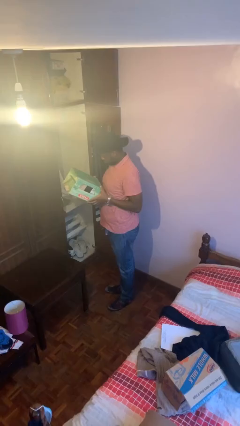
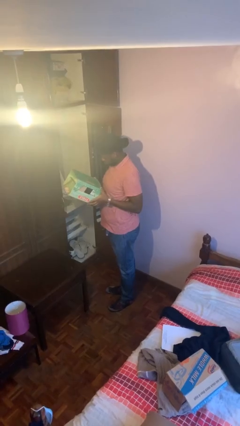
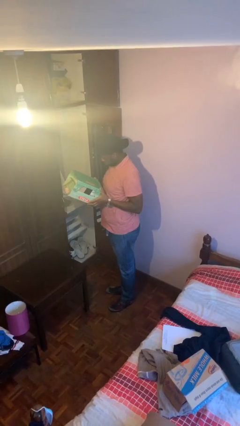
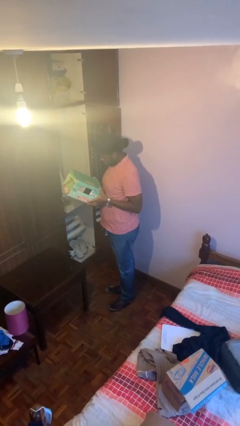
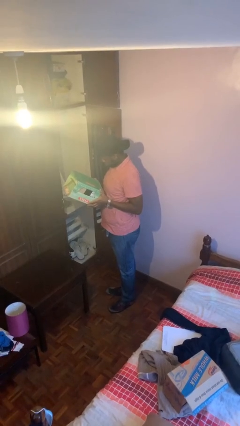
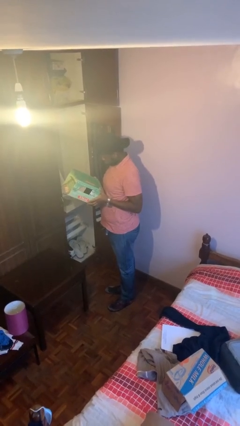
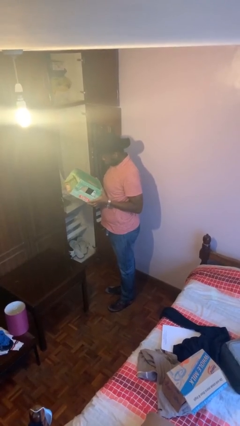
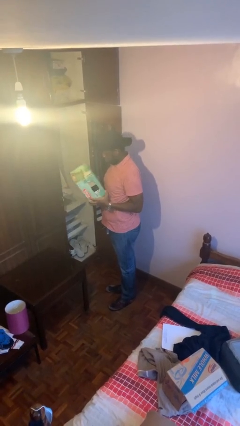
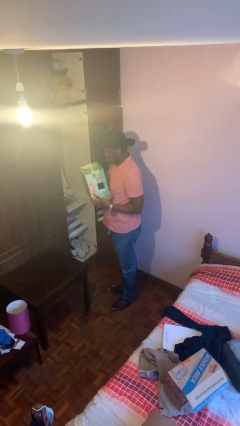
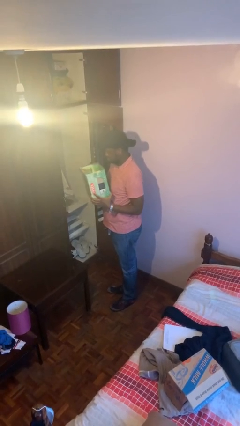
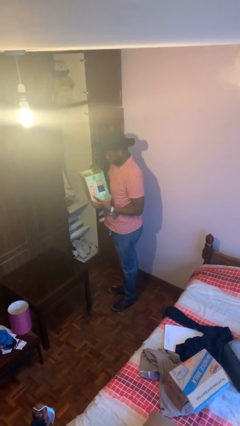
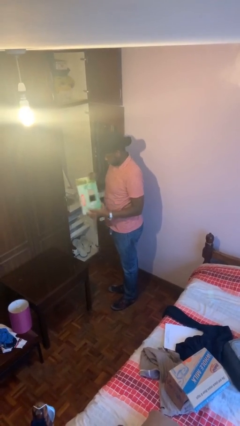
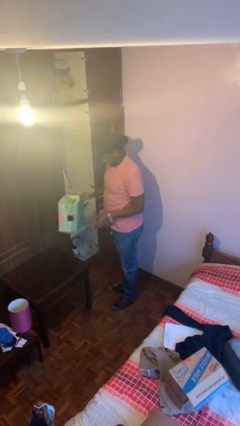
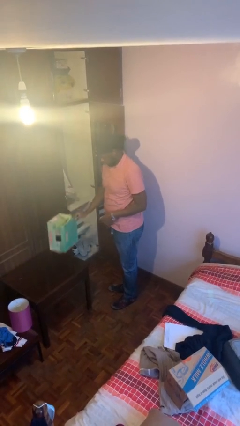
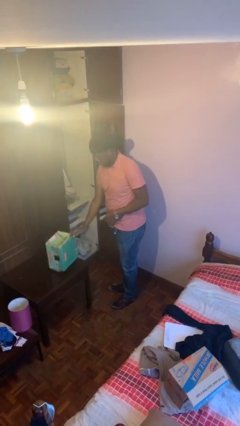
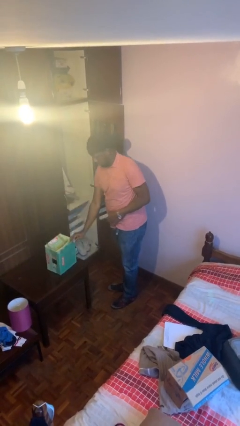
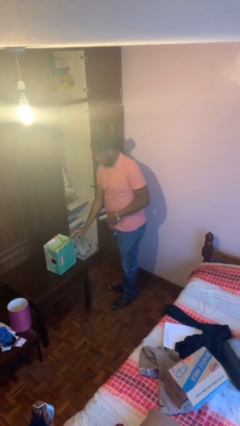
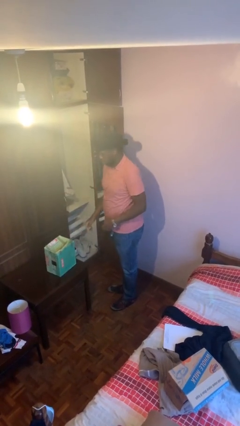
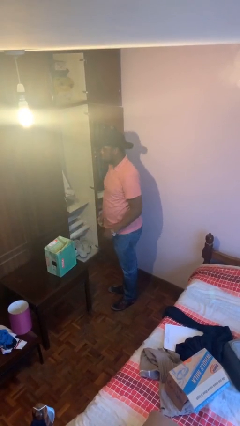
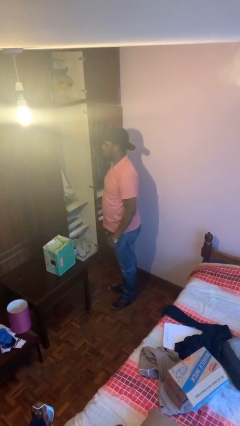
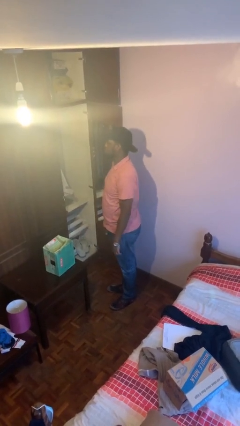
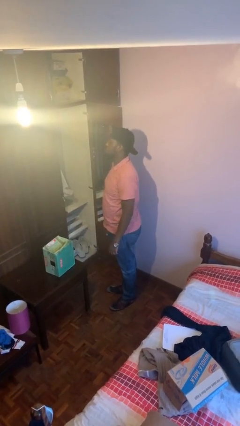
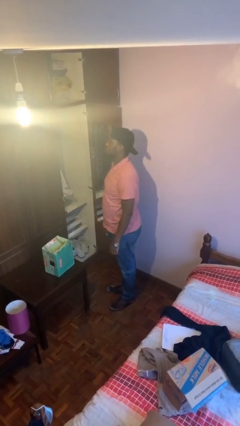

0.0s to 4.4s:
person puts down object on table

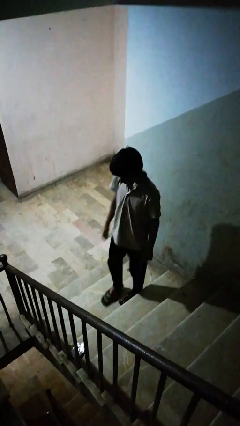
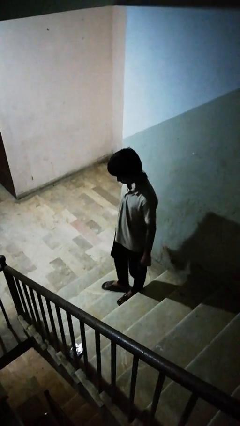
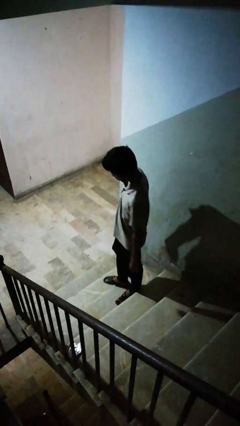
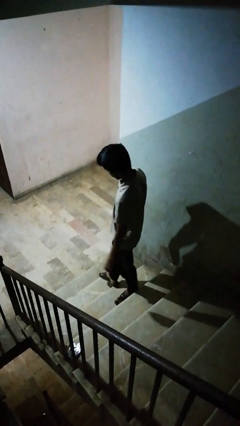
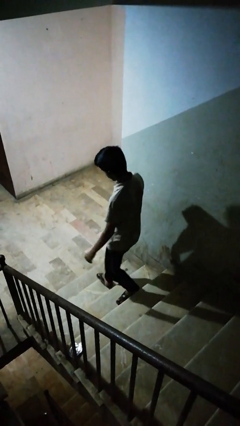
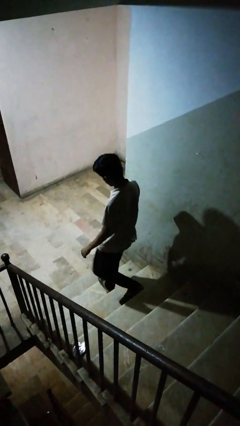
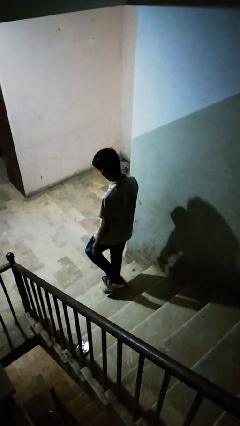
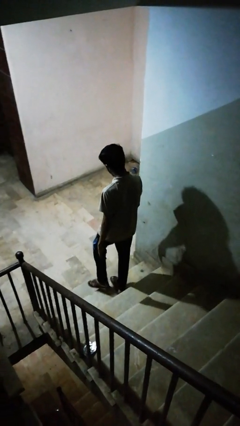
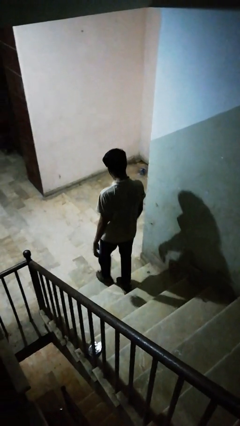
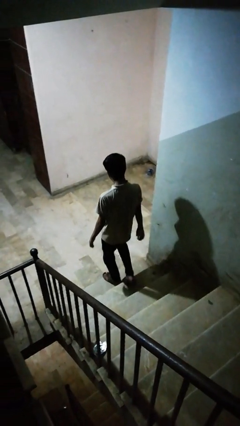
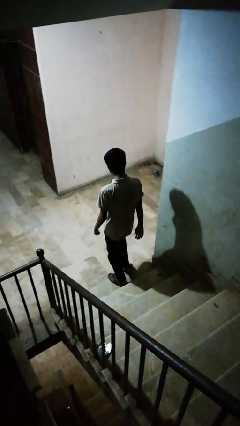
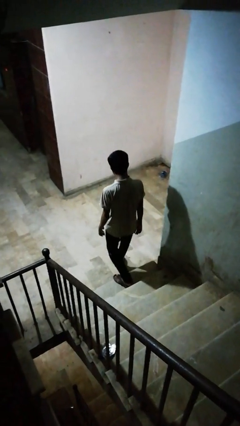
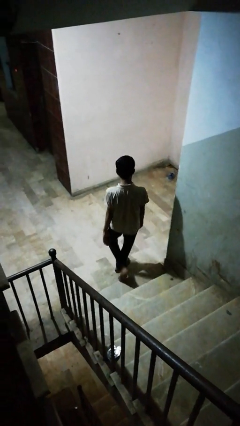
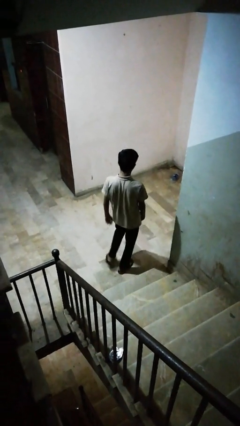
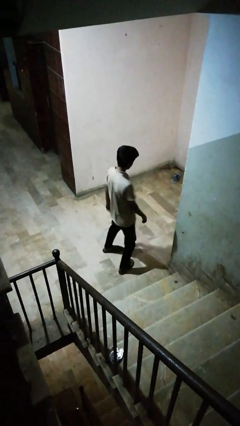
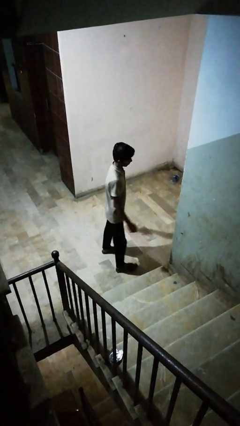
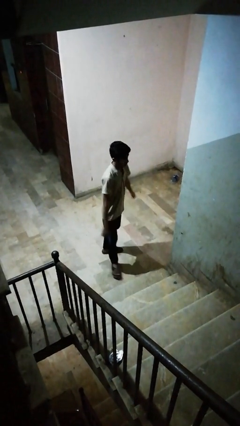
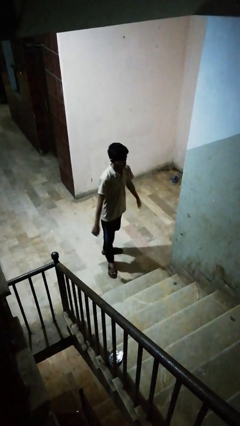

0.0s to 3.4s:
person climbs down stairs

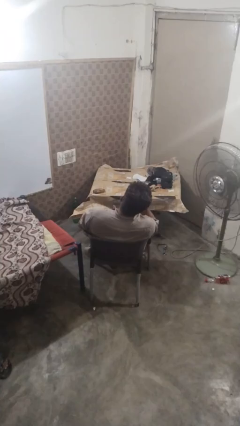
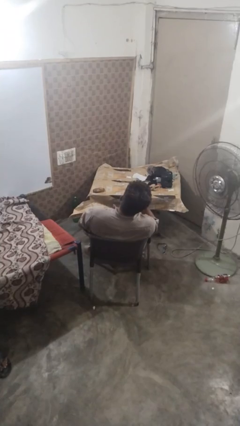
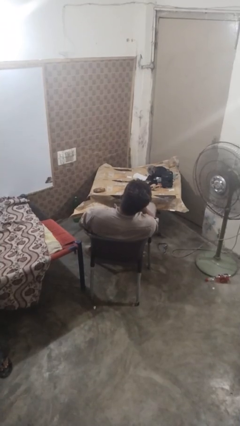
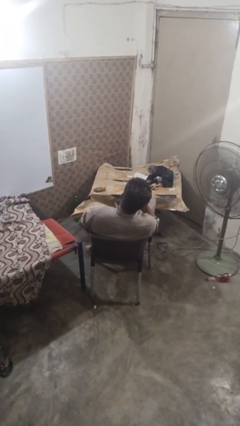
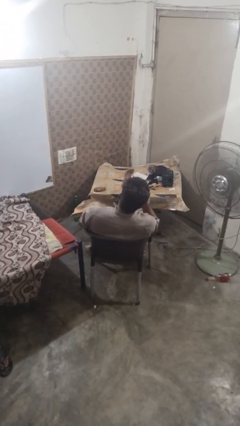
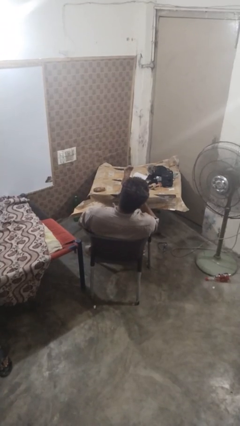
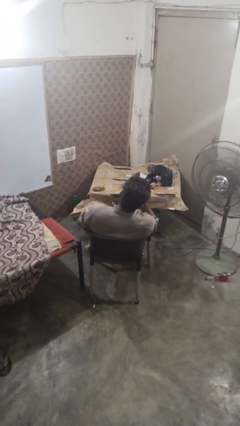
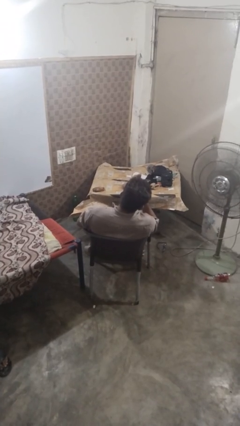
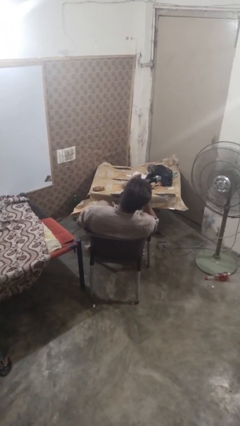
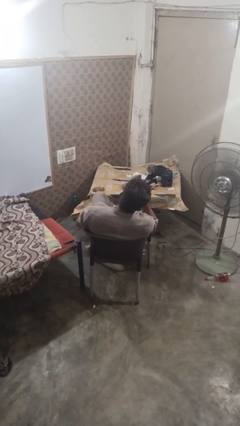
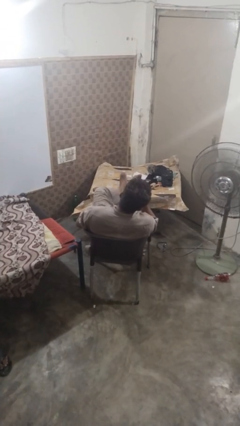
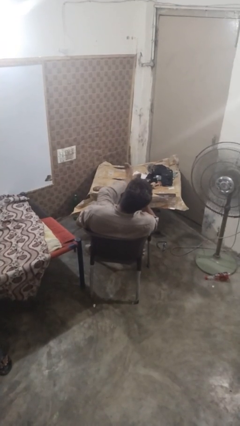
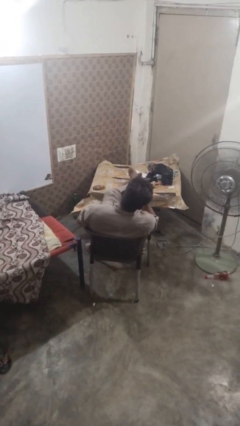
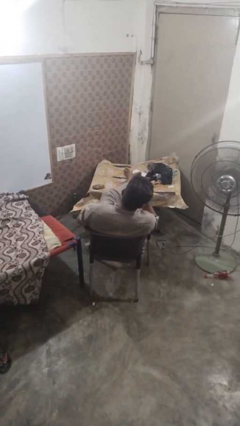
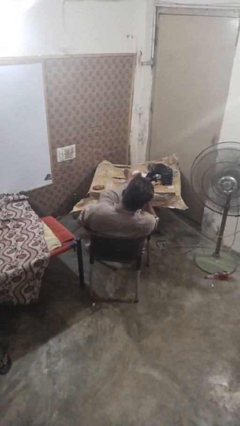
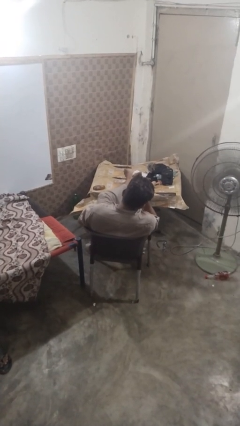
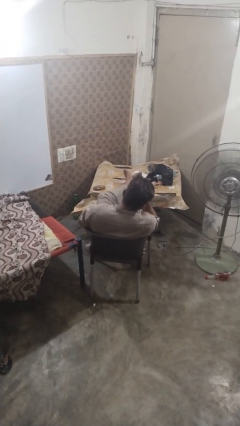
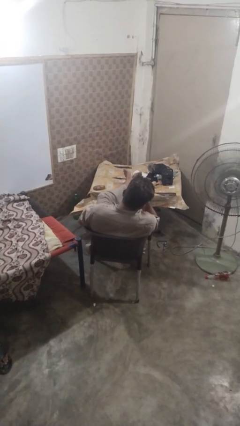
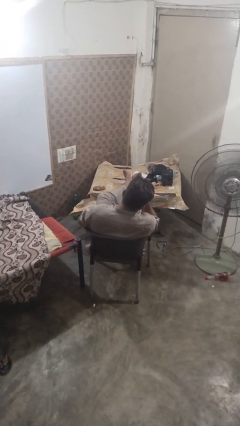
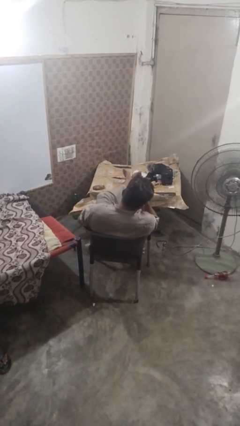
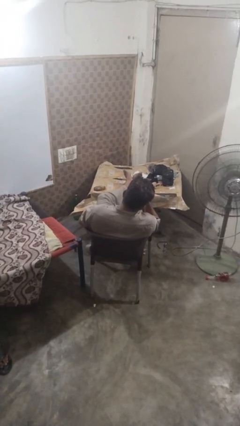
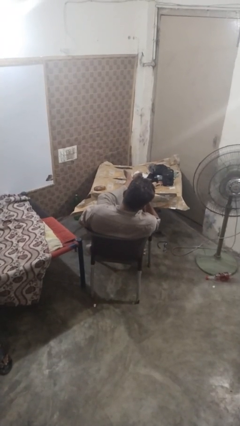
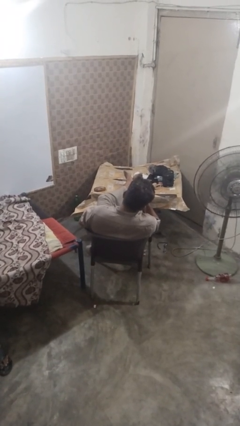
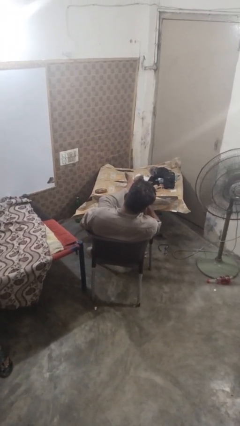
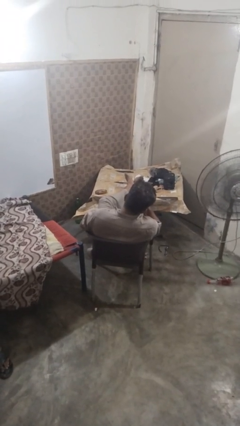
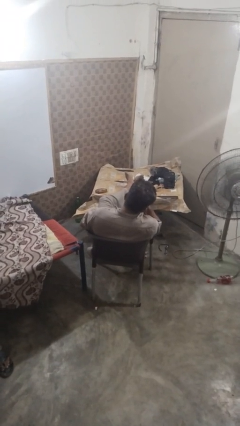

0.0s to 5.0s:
person puts feet up

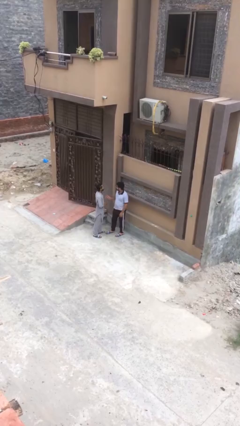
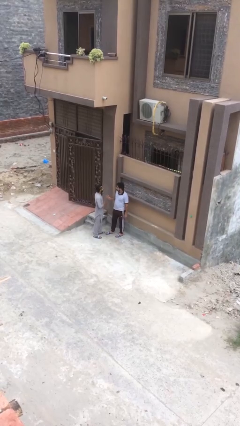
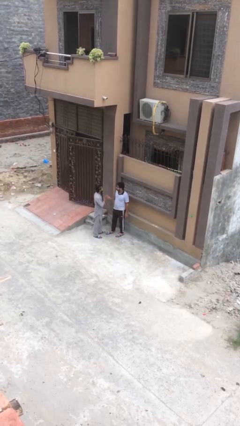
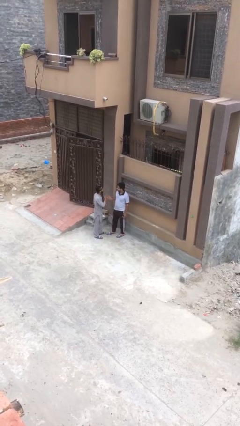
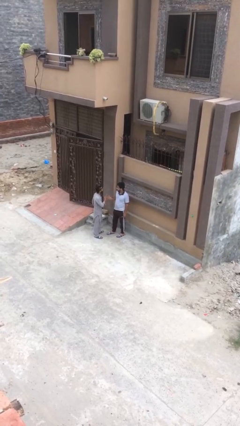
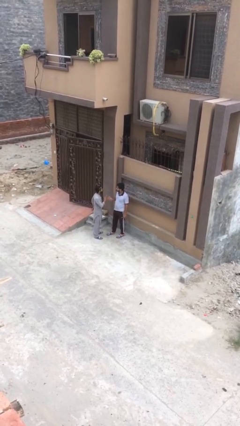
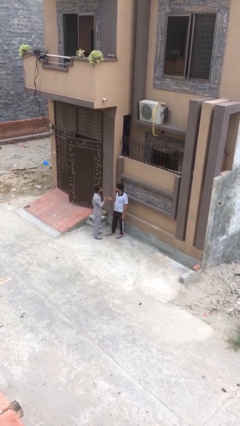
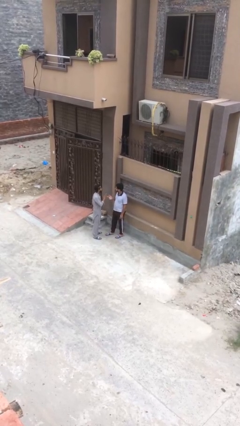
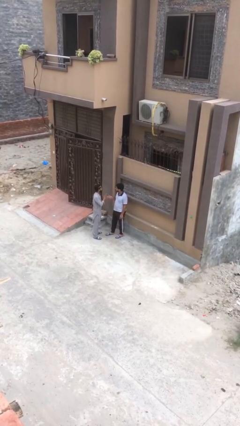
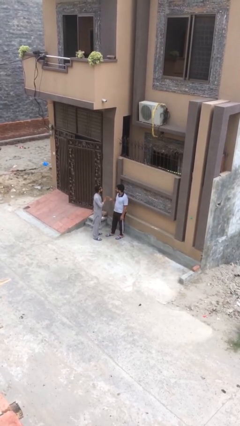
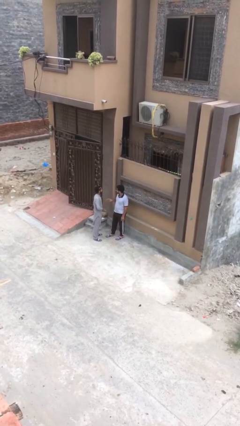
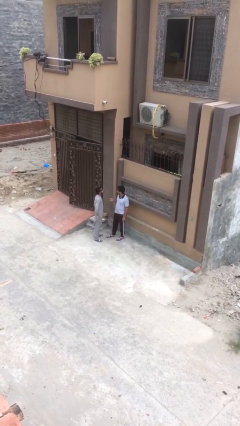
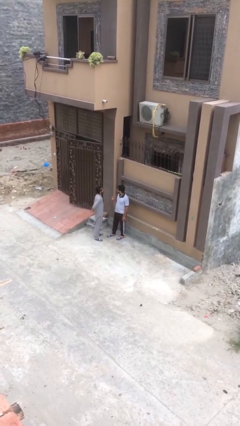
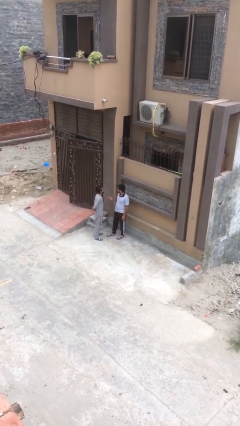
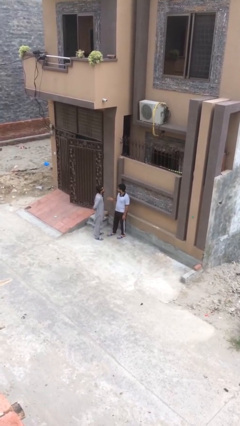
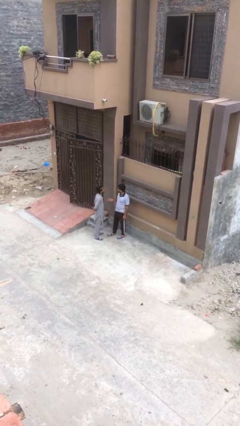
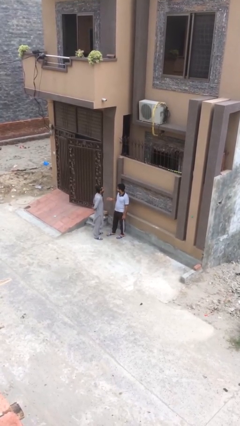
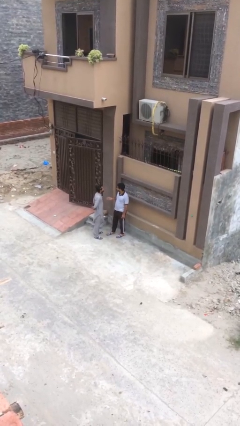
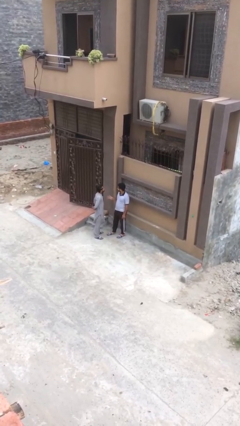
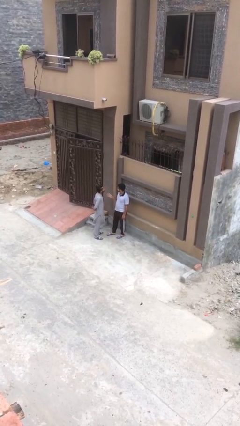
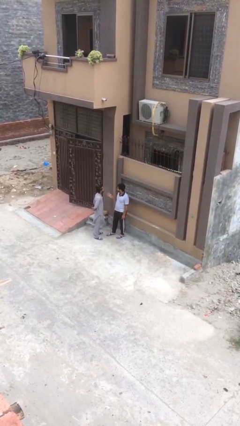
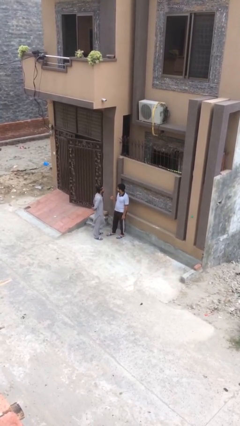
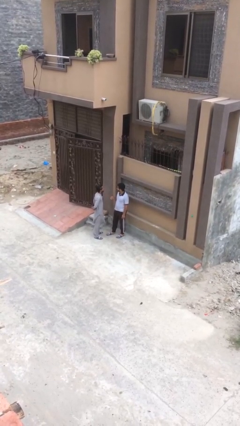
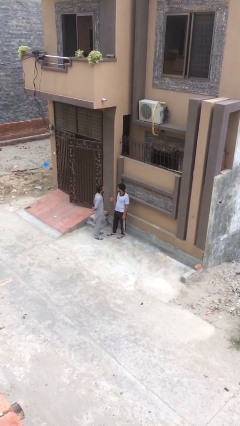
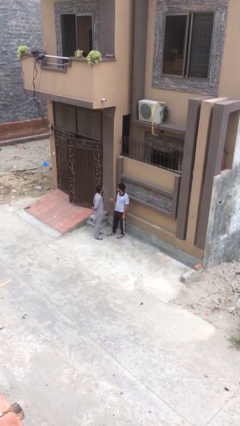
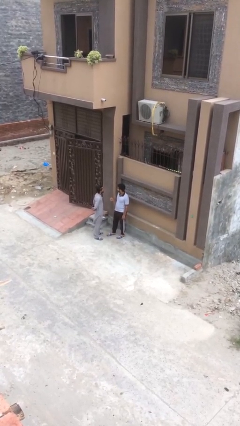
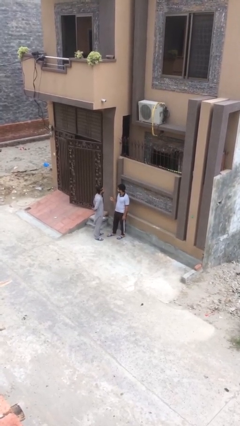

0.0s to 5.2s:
person talks to person
